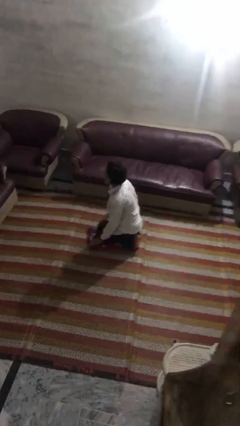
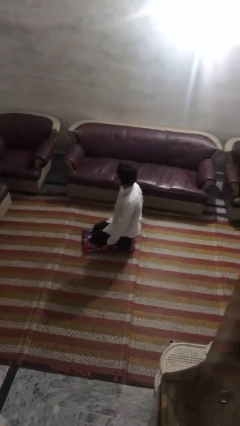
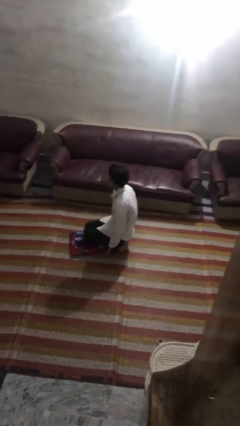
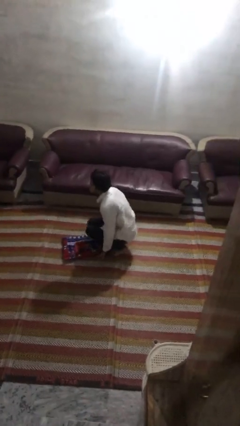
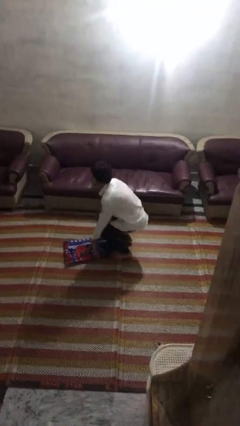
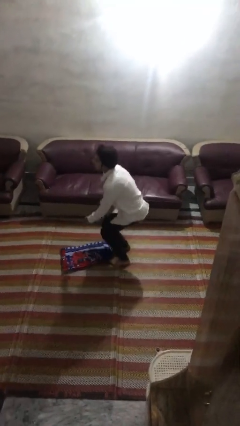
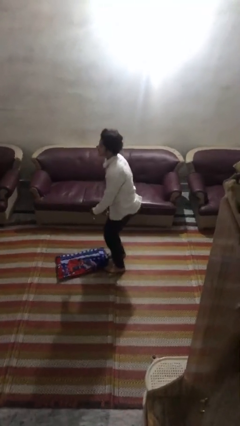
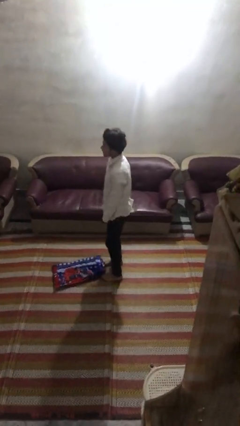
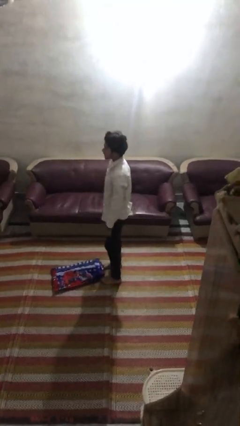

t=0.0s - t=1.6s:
person stands up from floor

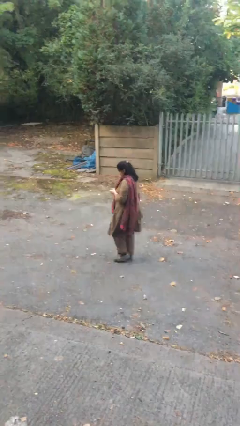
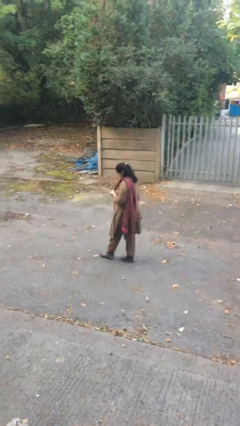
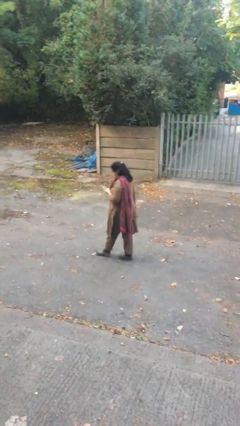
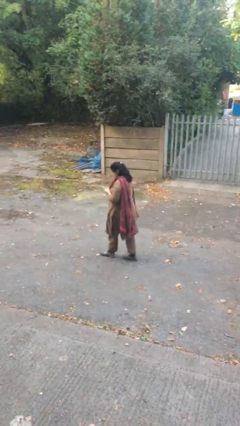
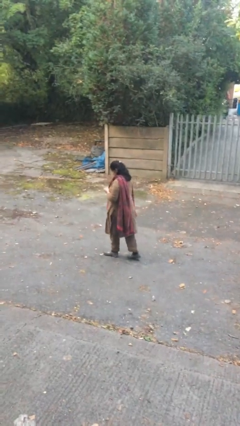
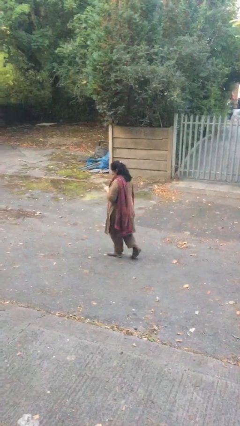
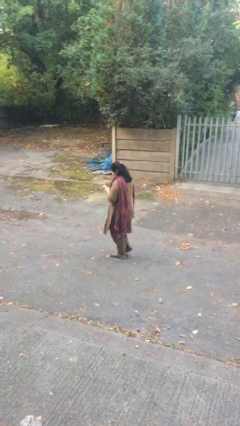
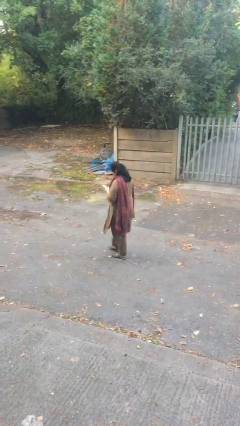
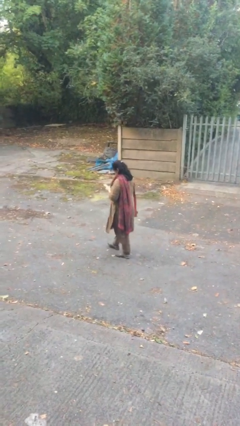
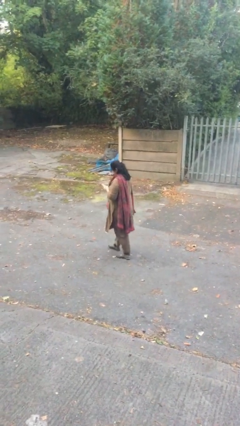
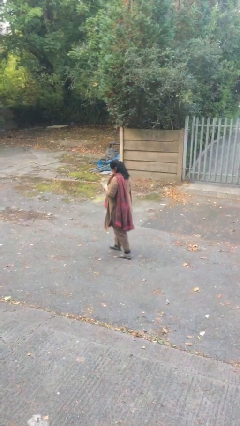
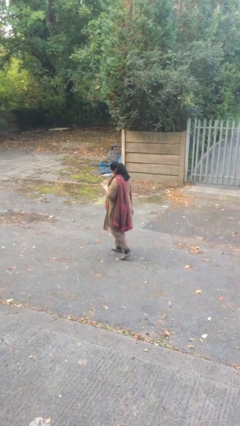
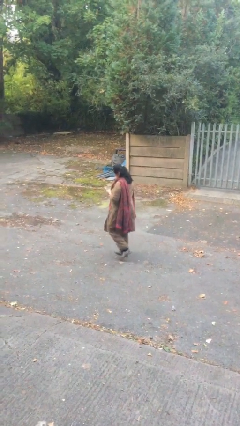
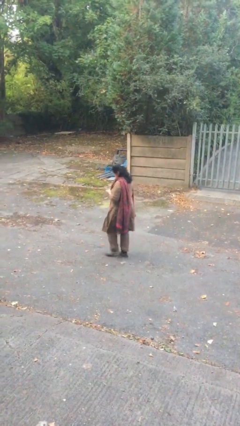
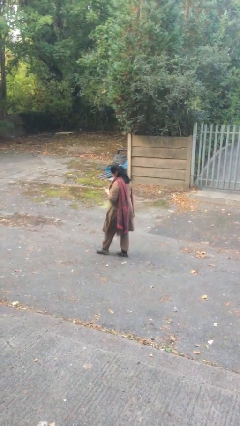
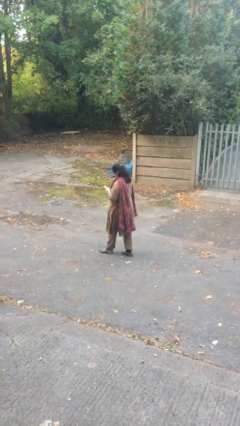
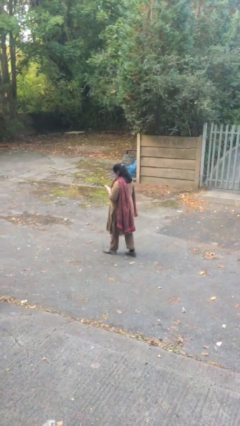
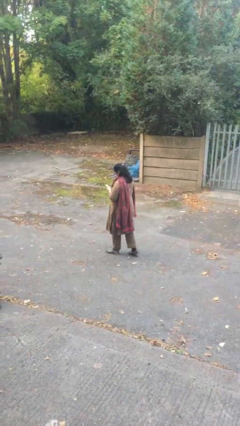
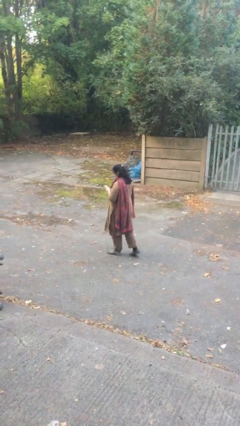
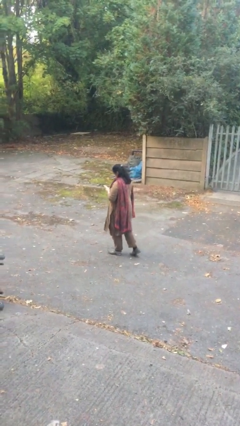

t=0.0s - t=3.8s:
person texts on phone

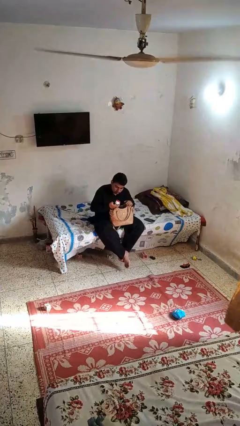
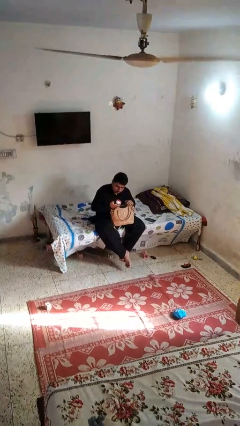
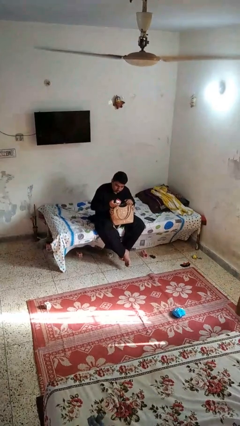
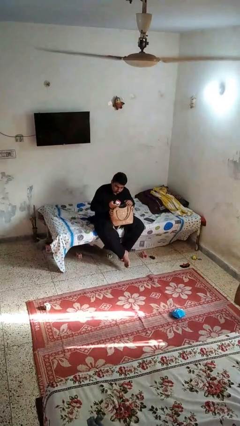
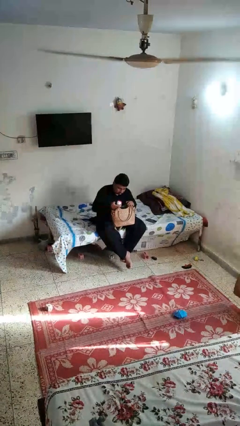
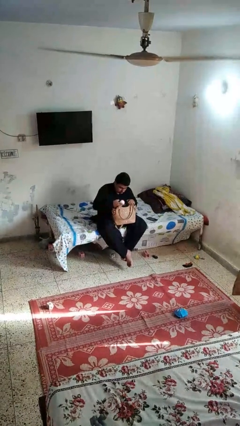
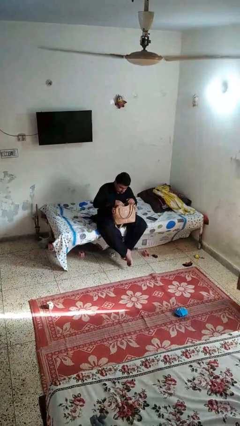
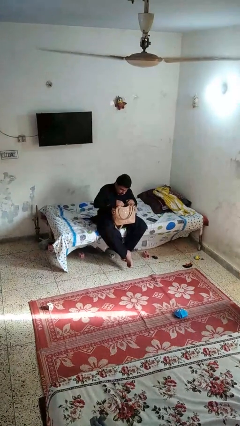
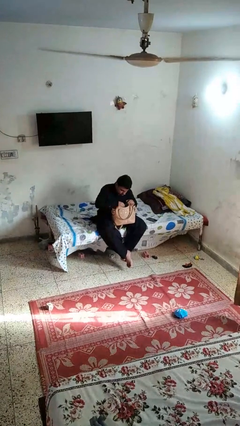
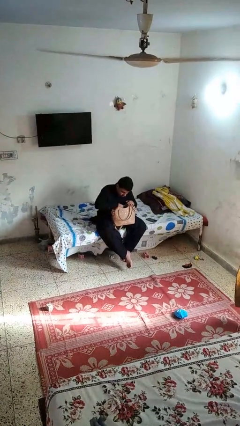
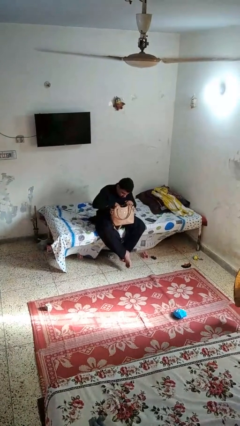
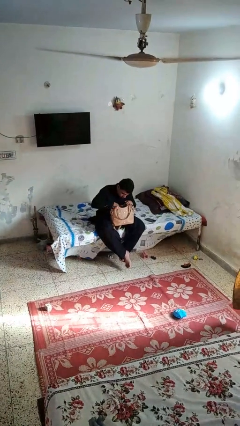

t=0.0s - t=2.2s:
person puts object into purse

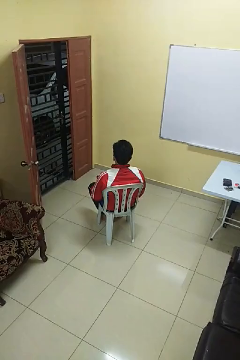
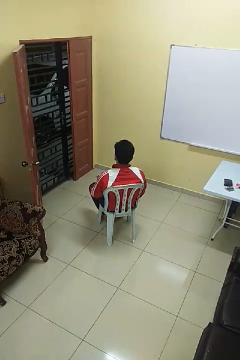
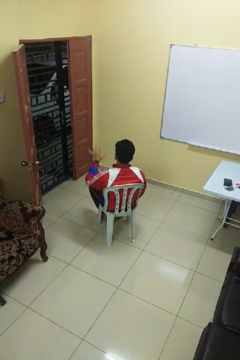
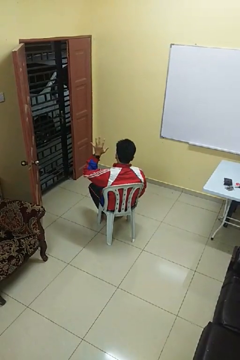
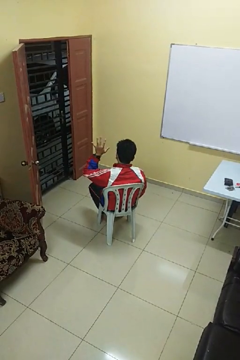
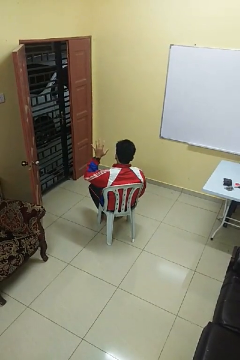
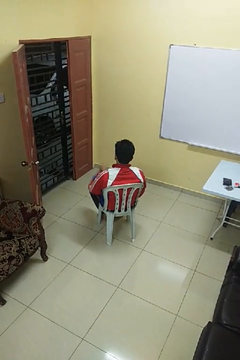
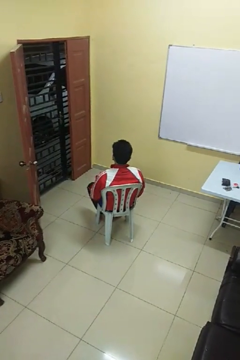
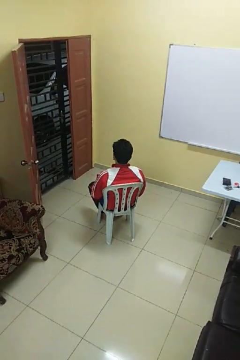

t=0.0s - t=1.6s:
person gestures number five

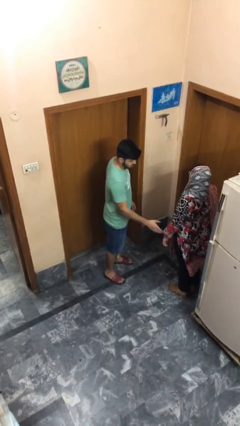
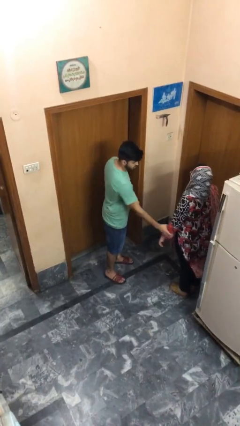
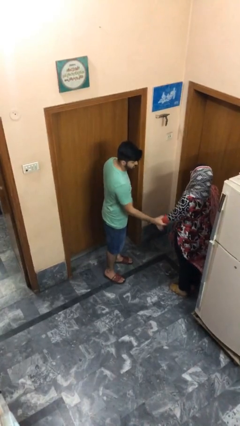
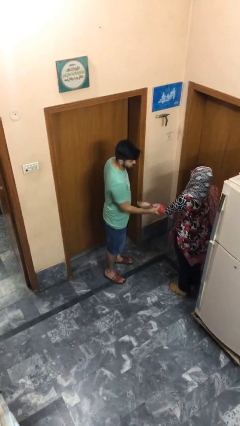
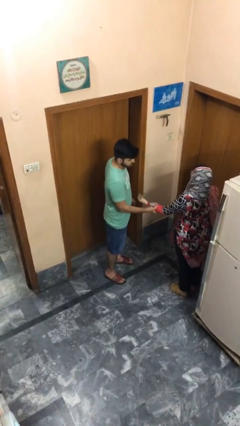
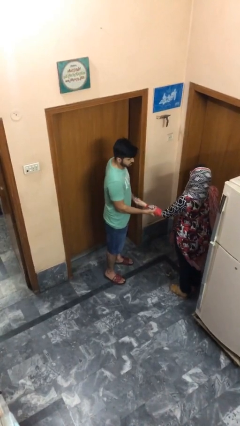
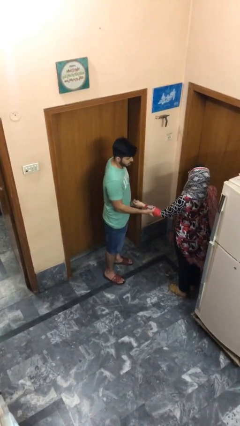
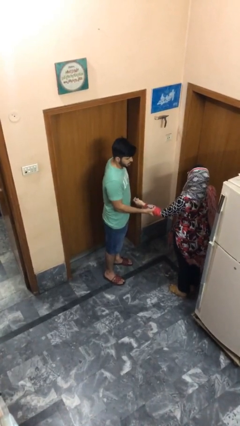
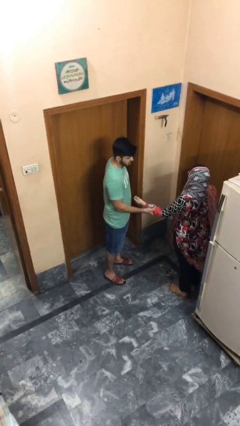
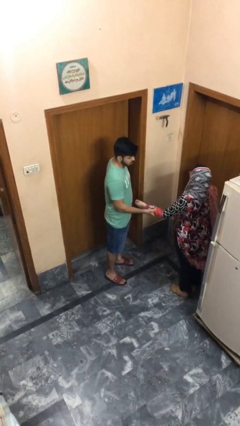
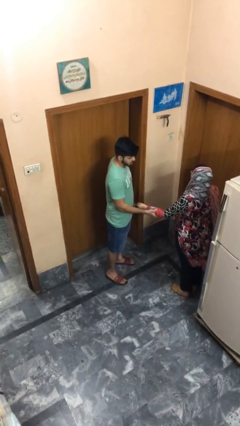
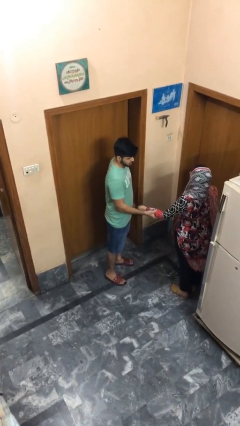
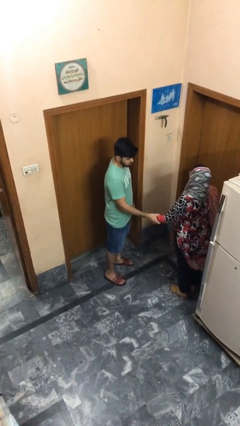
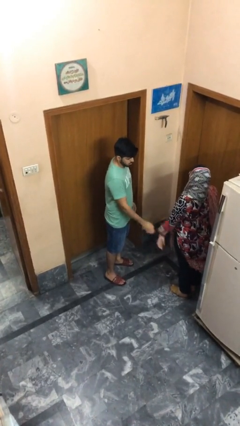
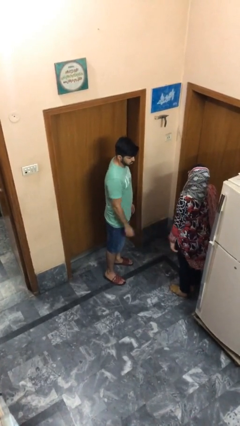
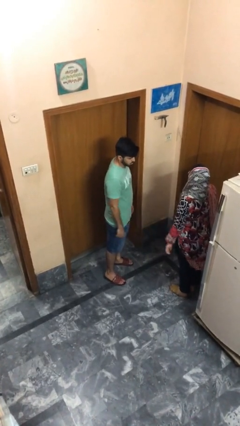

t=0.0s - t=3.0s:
person grabs person by forearm

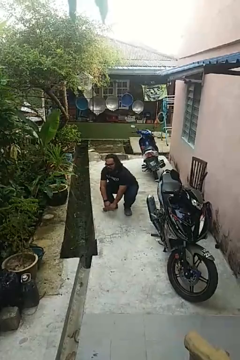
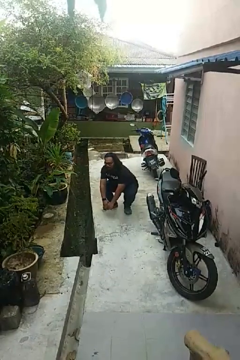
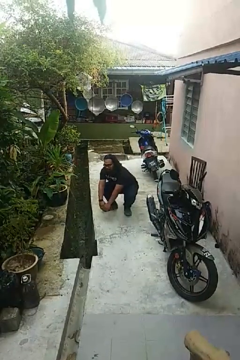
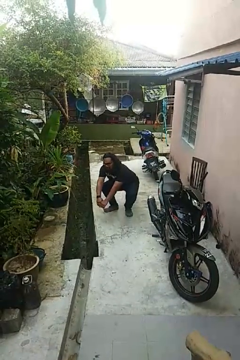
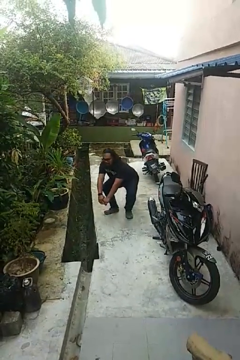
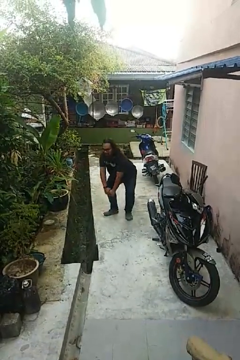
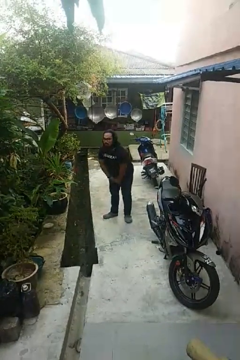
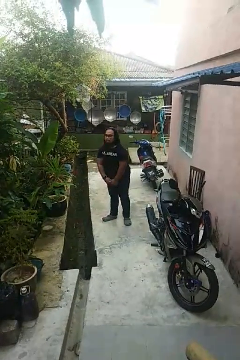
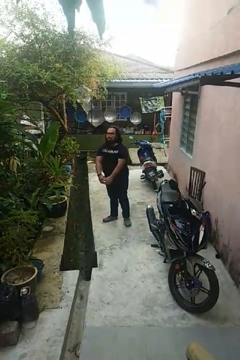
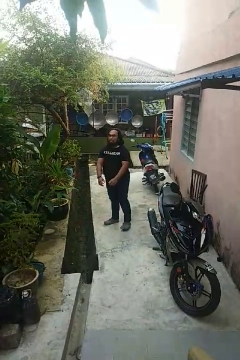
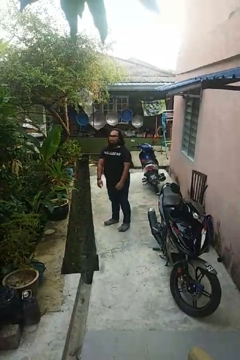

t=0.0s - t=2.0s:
person stands up

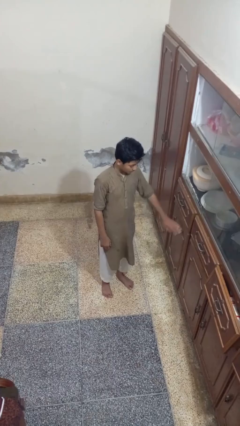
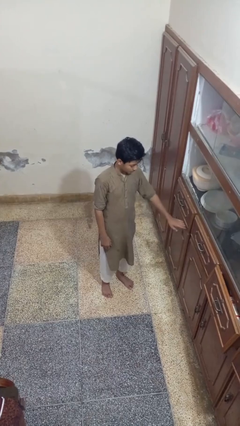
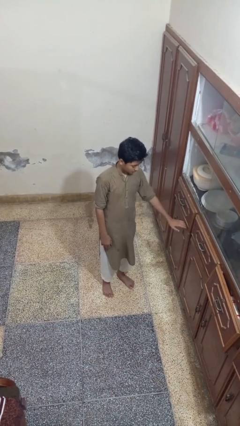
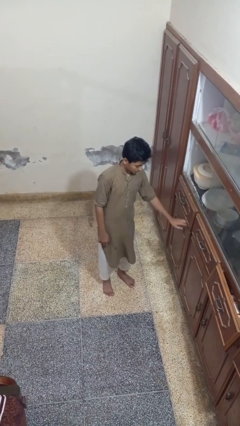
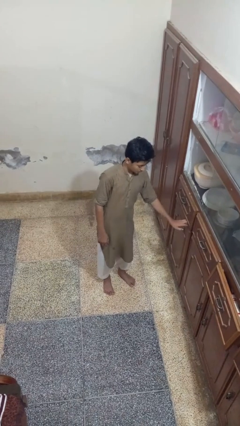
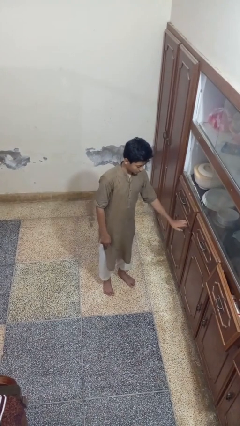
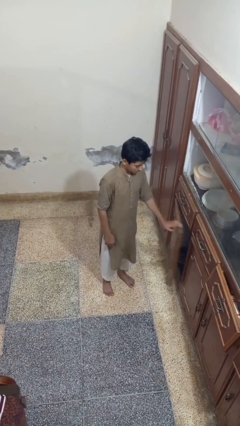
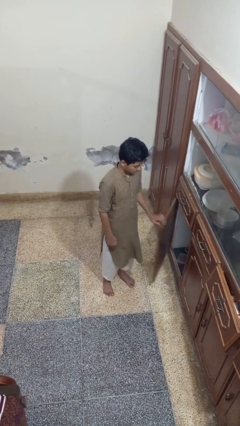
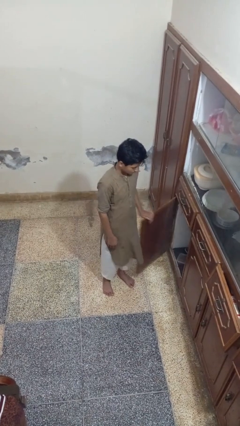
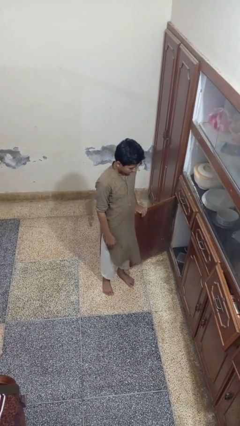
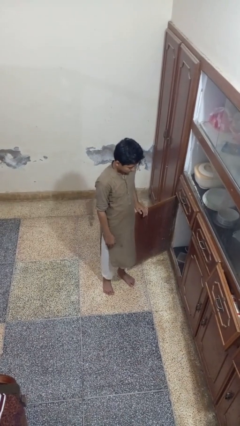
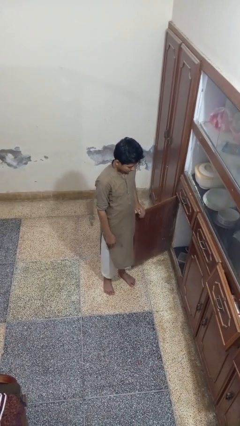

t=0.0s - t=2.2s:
person opens cabinet

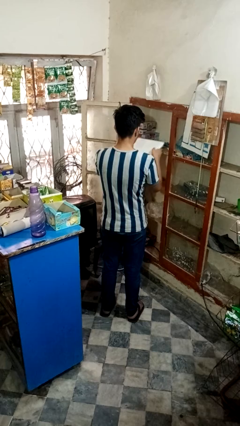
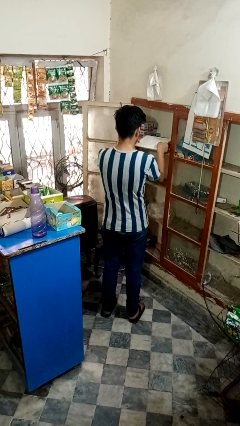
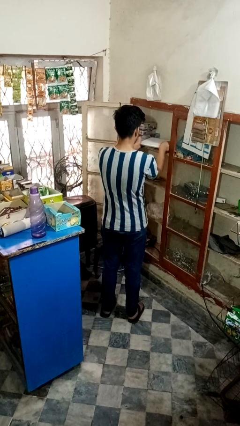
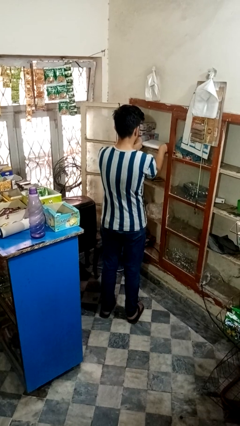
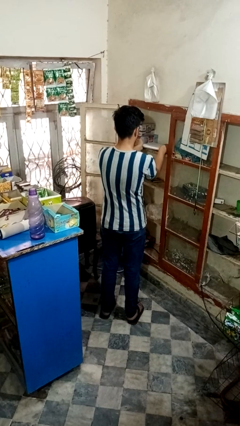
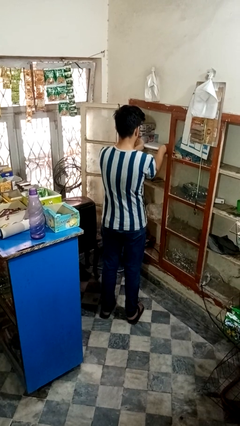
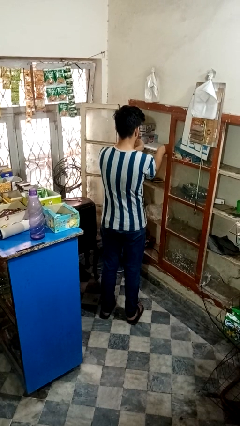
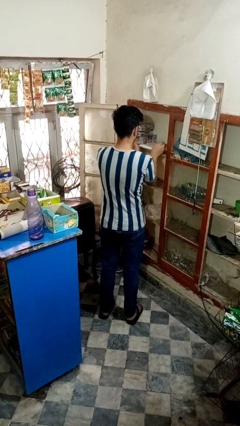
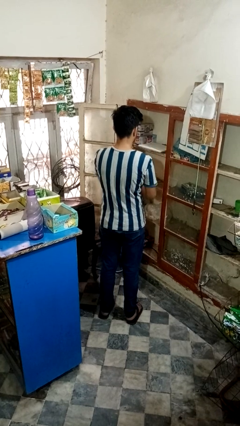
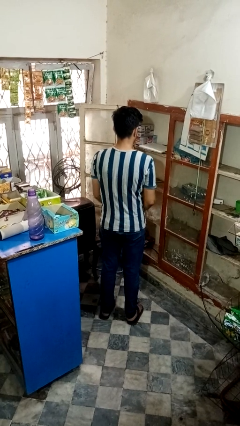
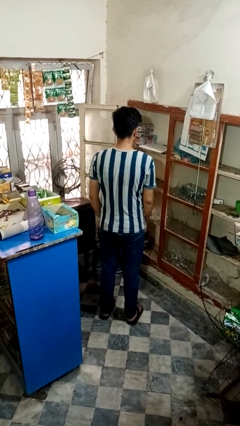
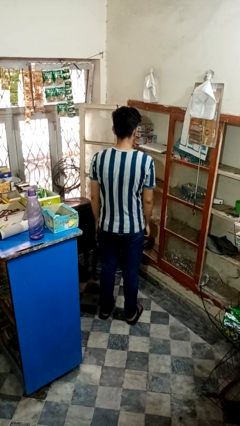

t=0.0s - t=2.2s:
person puts down object into cabinet
